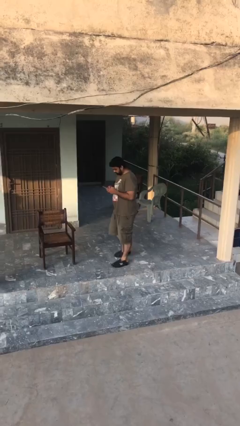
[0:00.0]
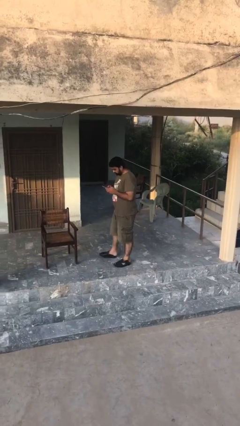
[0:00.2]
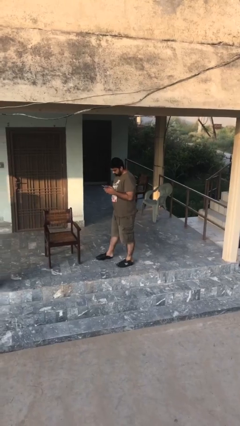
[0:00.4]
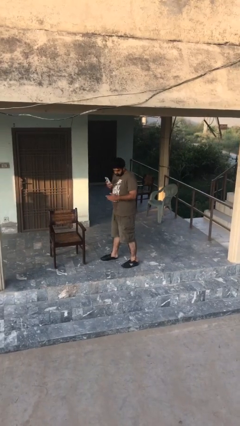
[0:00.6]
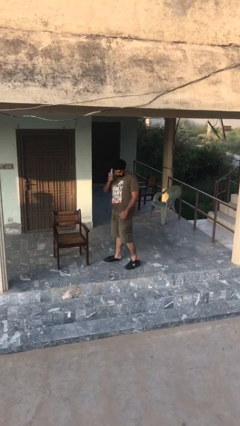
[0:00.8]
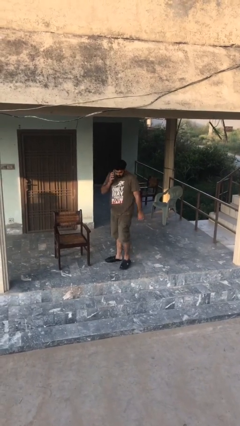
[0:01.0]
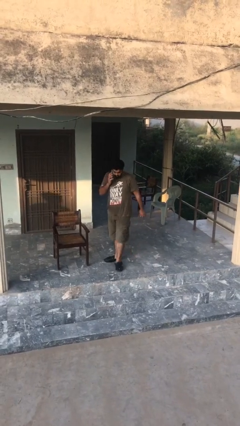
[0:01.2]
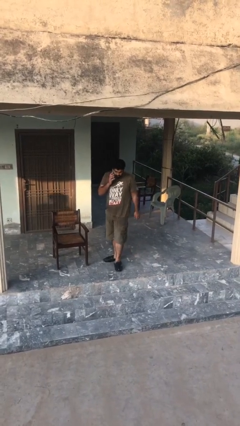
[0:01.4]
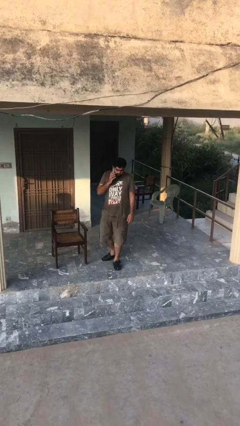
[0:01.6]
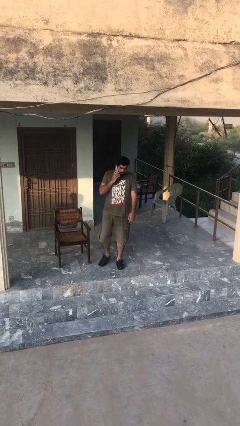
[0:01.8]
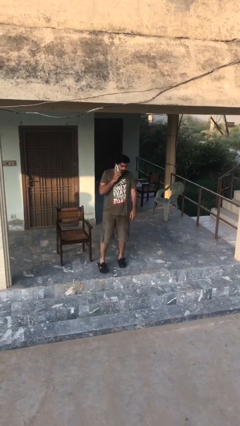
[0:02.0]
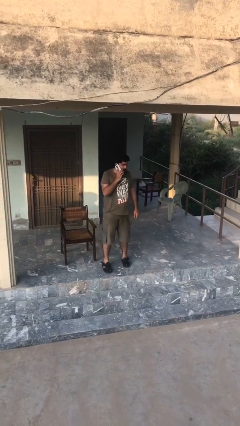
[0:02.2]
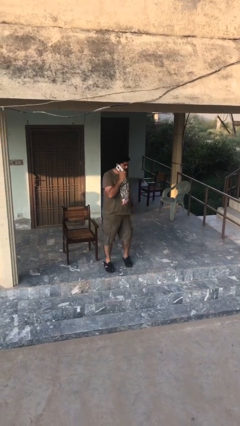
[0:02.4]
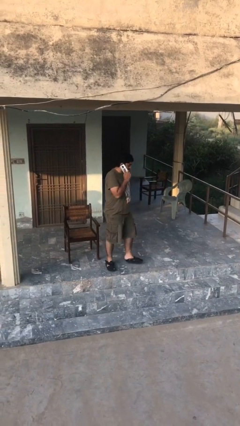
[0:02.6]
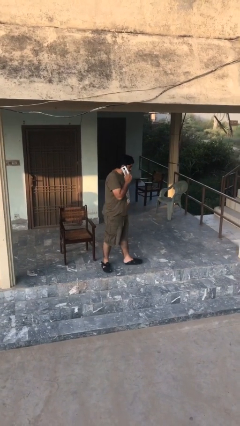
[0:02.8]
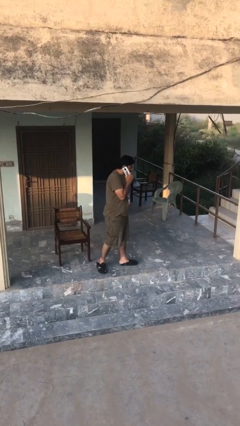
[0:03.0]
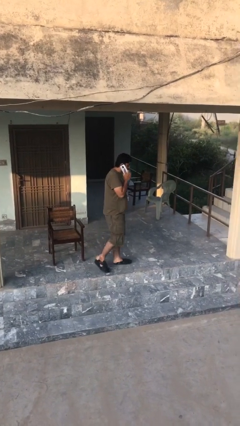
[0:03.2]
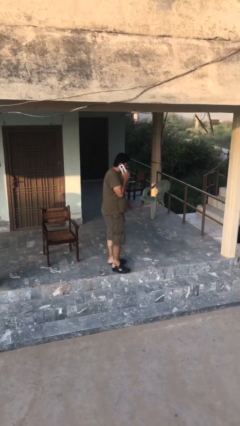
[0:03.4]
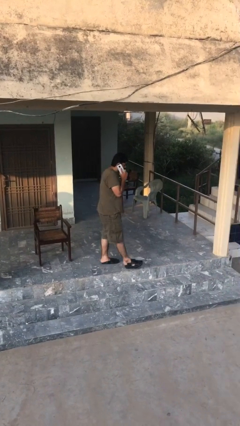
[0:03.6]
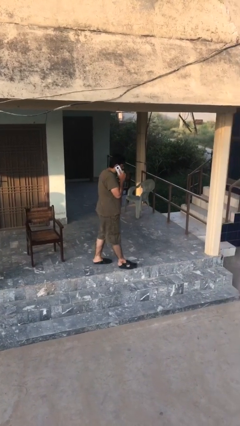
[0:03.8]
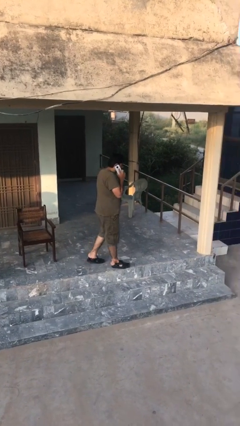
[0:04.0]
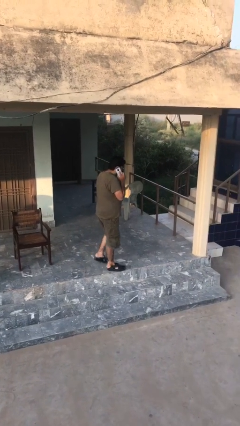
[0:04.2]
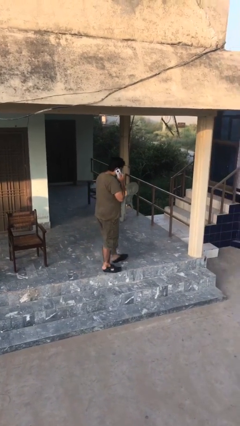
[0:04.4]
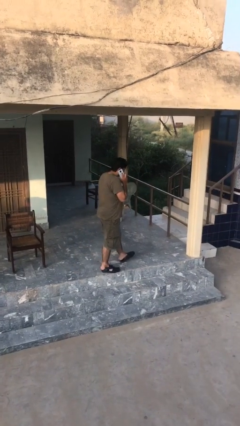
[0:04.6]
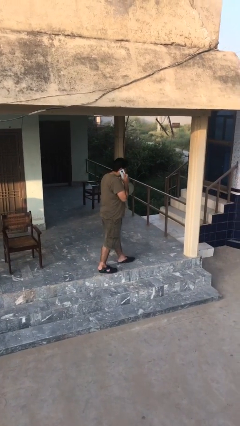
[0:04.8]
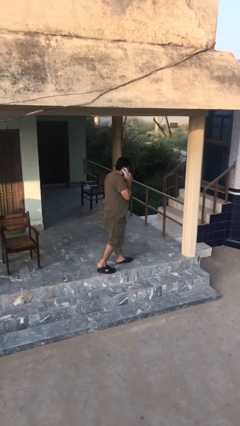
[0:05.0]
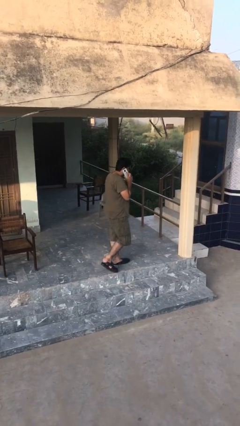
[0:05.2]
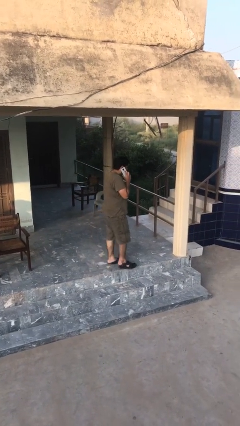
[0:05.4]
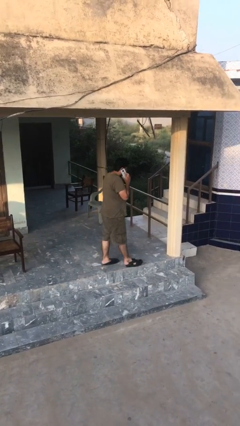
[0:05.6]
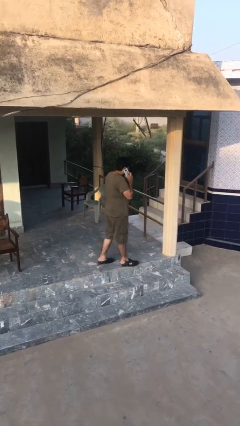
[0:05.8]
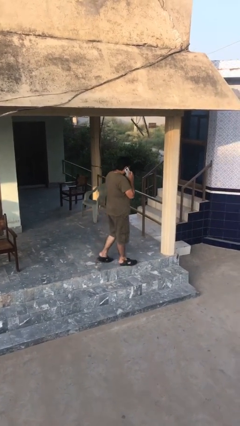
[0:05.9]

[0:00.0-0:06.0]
person talks on phone

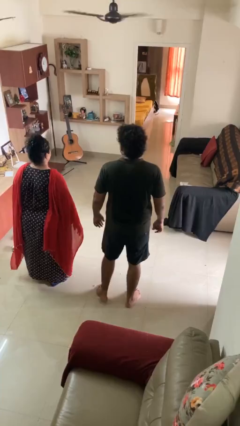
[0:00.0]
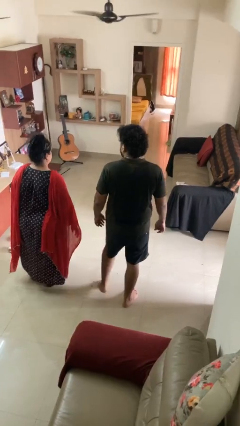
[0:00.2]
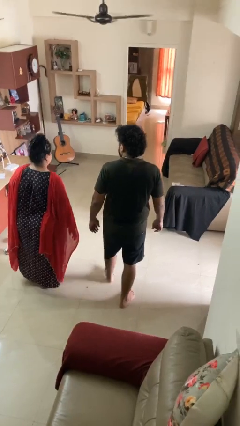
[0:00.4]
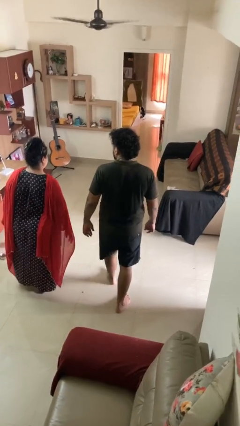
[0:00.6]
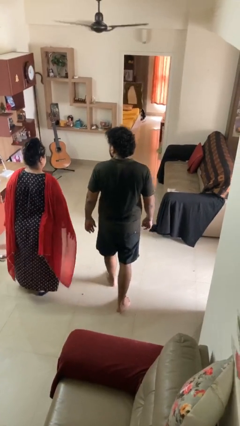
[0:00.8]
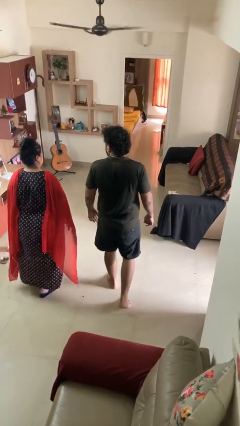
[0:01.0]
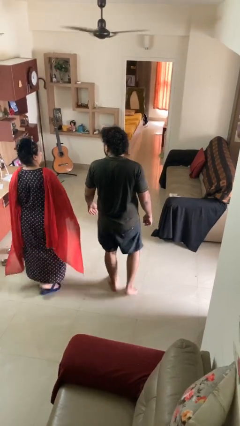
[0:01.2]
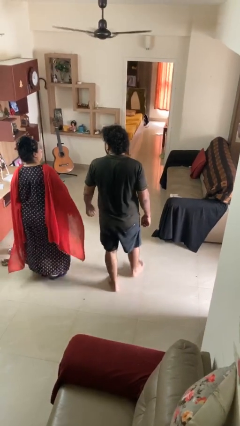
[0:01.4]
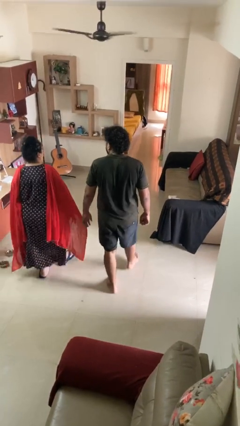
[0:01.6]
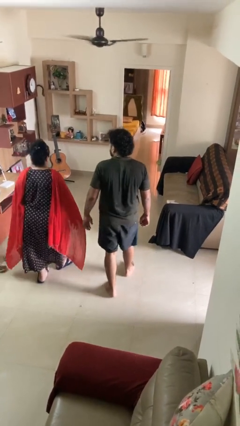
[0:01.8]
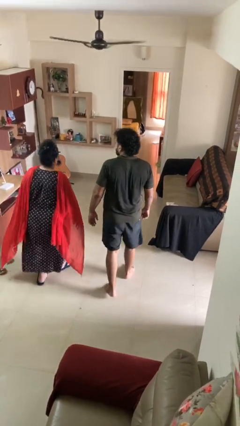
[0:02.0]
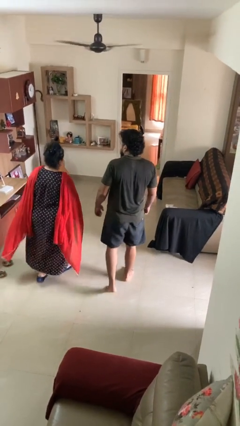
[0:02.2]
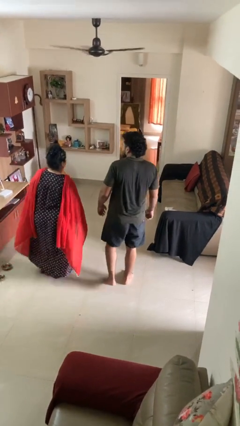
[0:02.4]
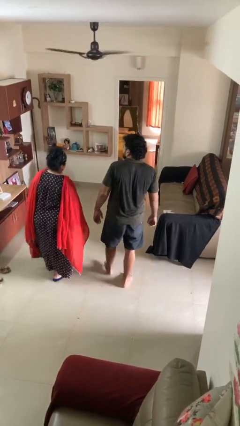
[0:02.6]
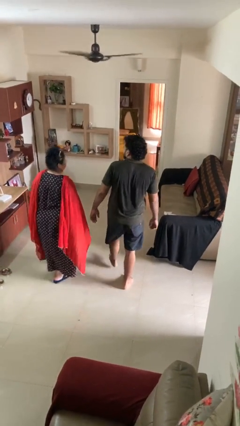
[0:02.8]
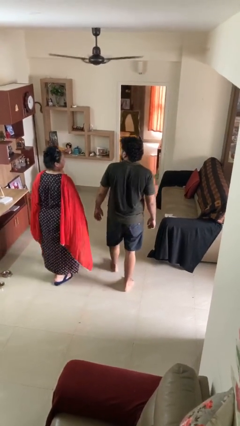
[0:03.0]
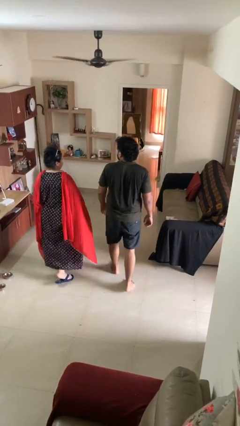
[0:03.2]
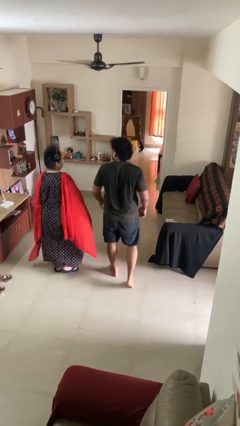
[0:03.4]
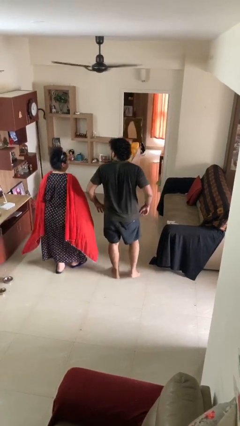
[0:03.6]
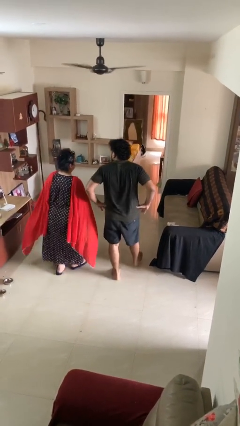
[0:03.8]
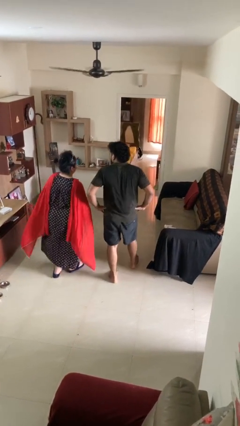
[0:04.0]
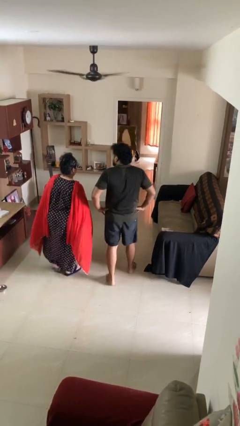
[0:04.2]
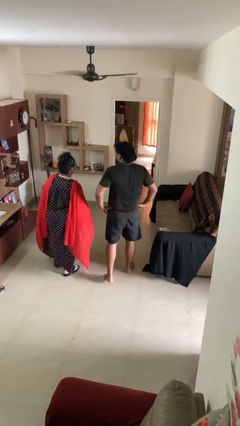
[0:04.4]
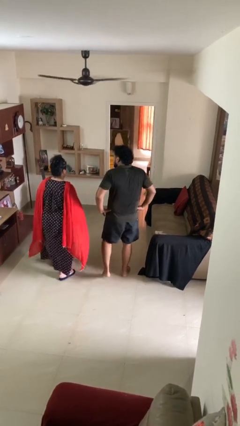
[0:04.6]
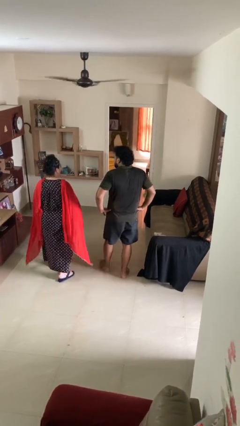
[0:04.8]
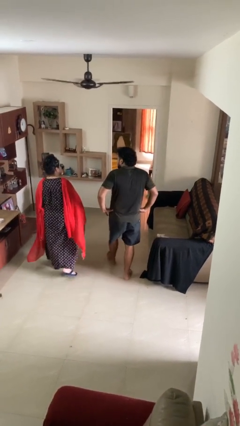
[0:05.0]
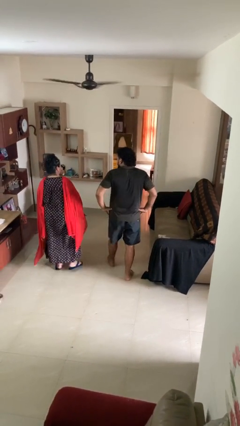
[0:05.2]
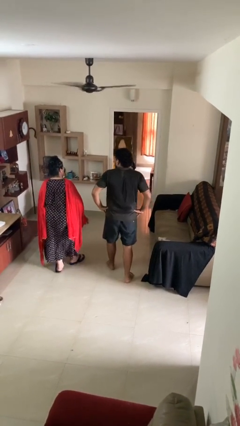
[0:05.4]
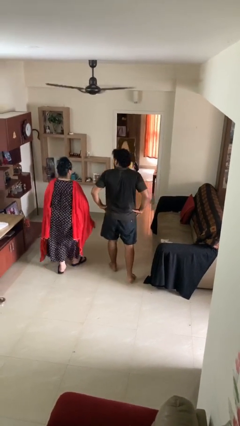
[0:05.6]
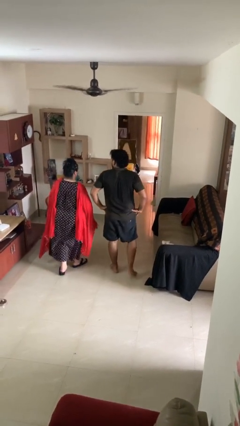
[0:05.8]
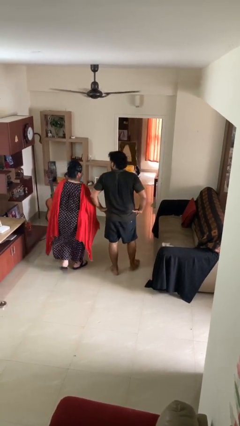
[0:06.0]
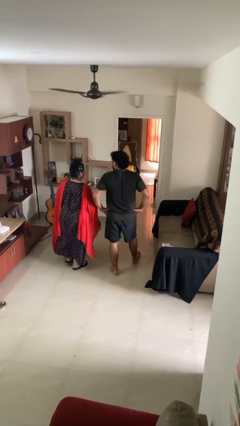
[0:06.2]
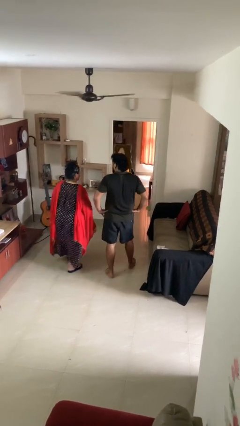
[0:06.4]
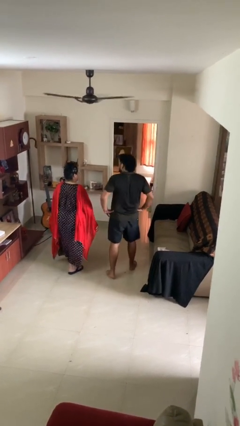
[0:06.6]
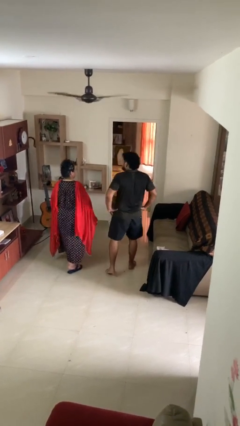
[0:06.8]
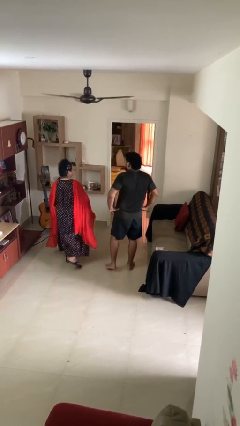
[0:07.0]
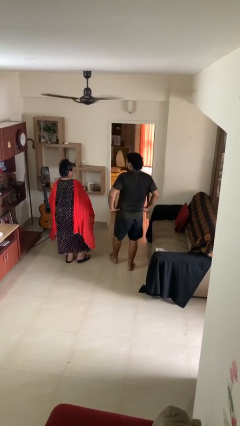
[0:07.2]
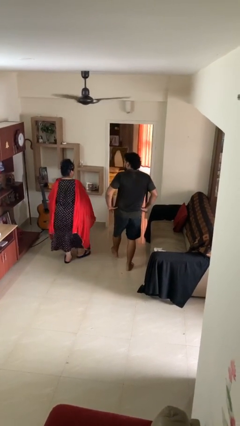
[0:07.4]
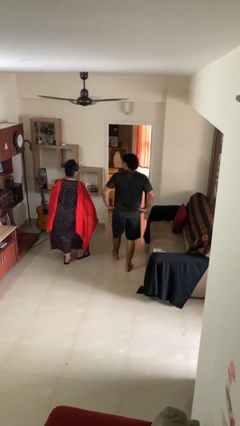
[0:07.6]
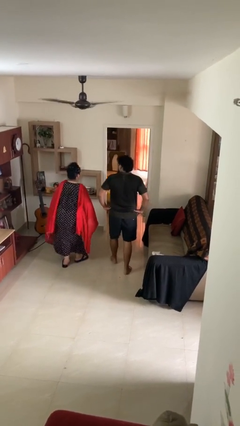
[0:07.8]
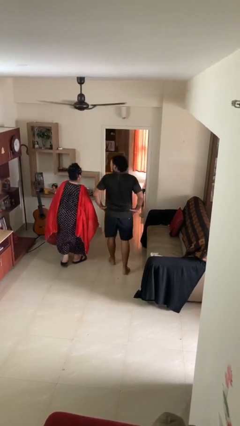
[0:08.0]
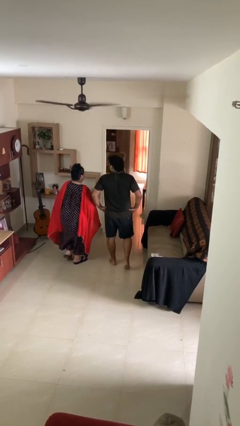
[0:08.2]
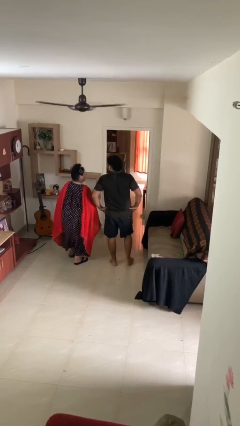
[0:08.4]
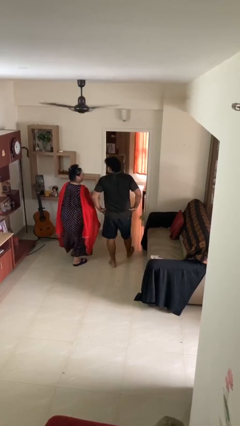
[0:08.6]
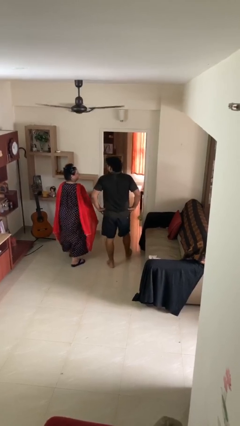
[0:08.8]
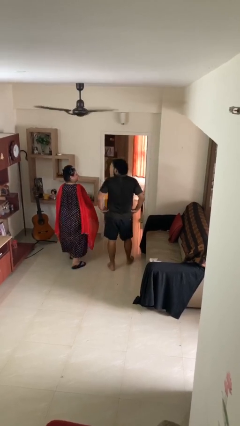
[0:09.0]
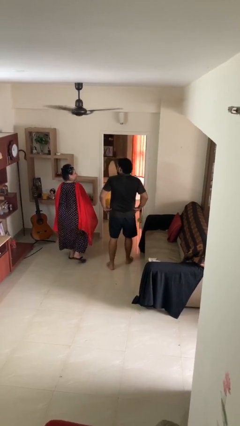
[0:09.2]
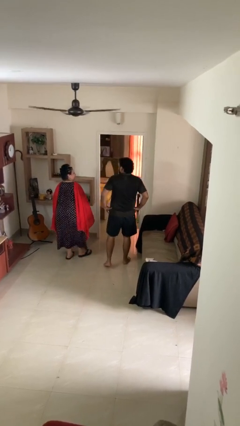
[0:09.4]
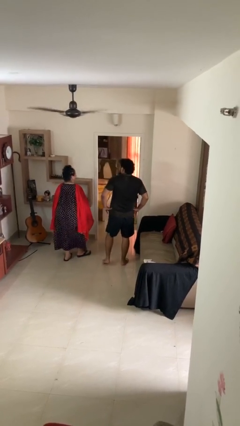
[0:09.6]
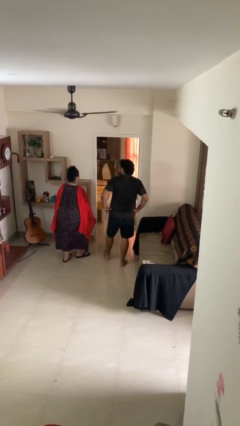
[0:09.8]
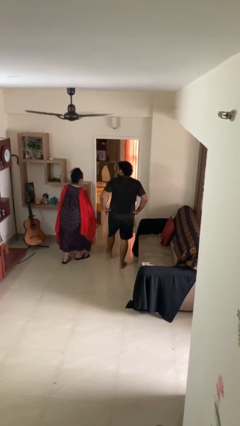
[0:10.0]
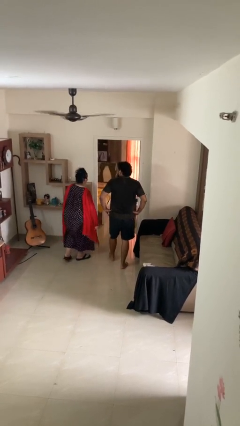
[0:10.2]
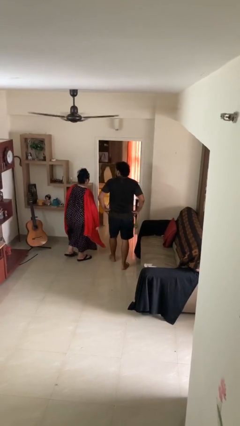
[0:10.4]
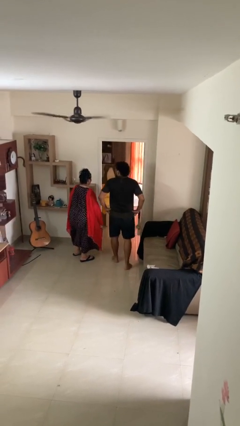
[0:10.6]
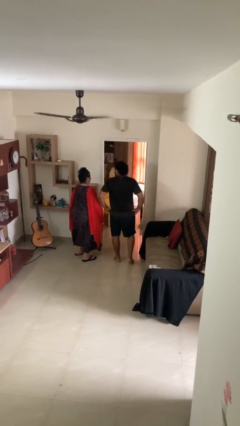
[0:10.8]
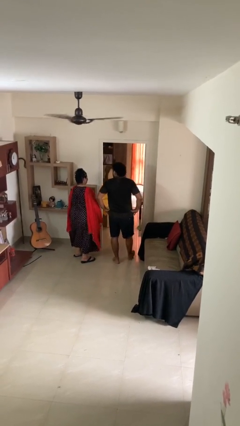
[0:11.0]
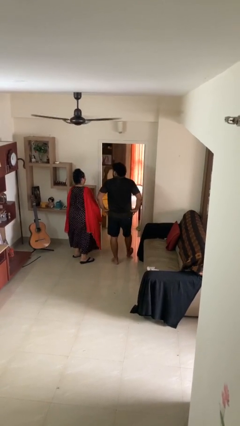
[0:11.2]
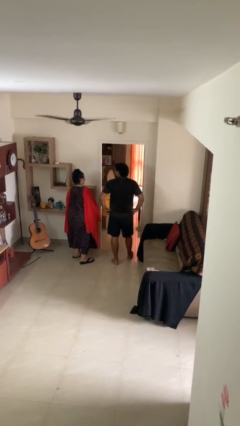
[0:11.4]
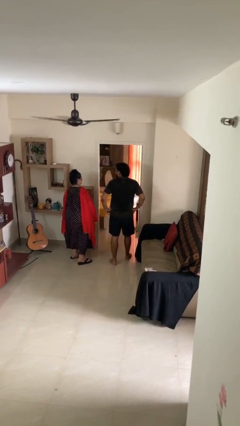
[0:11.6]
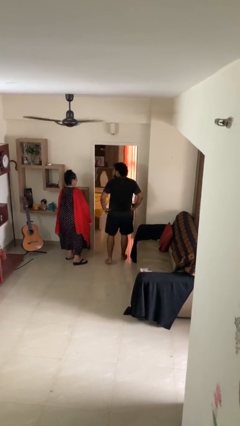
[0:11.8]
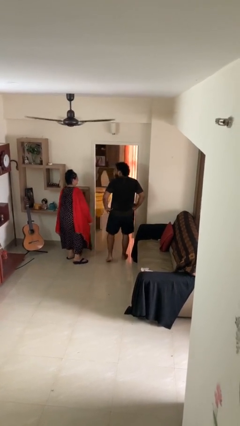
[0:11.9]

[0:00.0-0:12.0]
person talks to person
